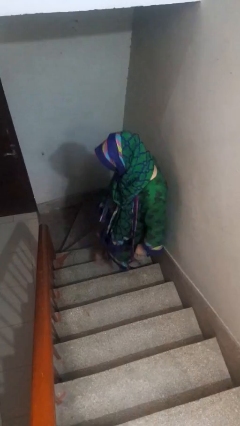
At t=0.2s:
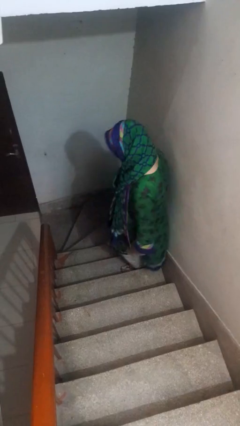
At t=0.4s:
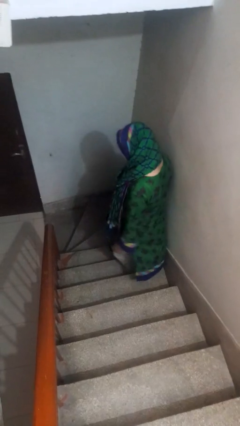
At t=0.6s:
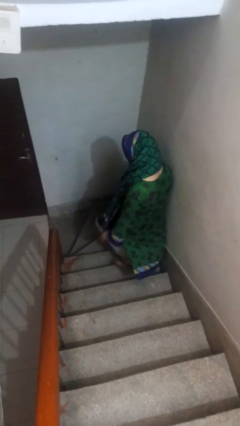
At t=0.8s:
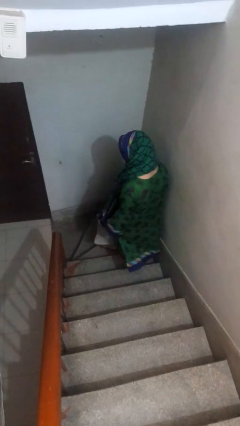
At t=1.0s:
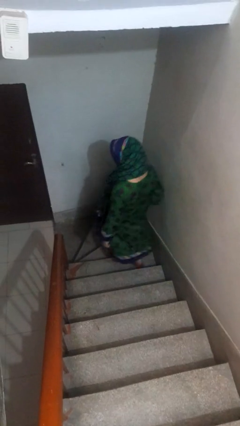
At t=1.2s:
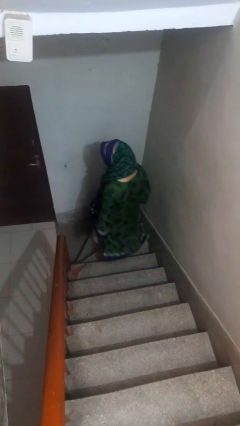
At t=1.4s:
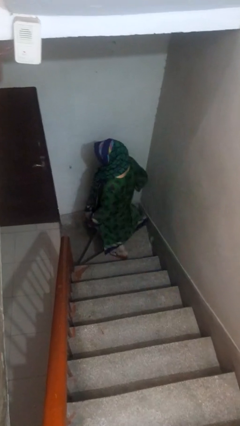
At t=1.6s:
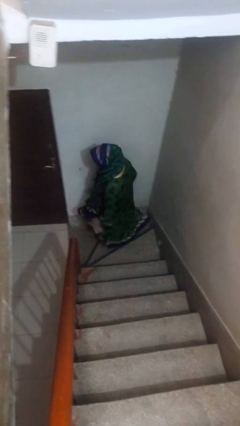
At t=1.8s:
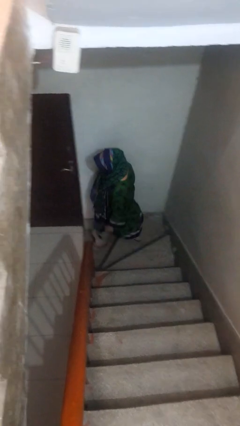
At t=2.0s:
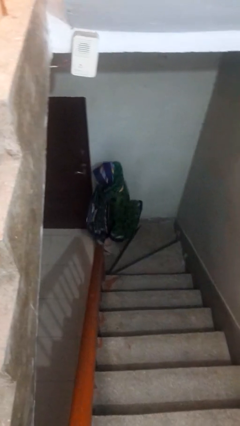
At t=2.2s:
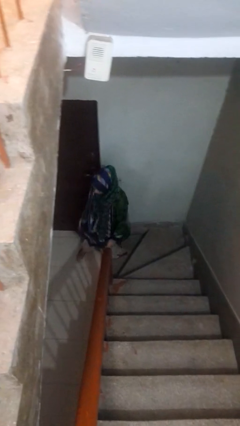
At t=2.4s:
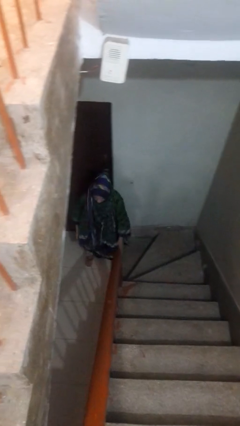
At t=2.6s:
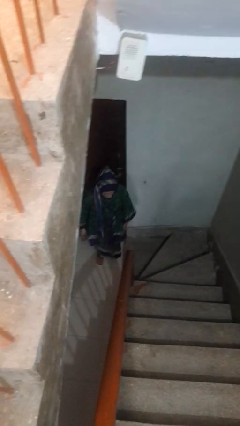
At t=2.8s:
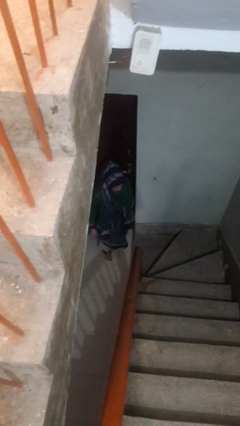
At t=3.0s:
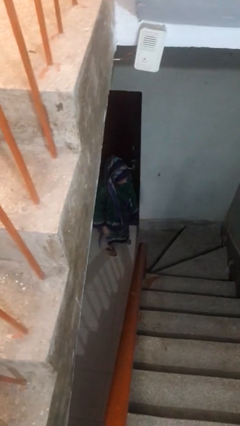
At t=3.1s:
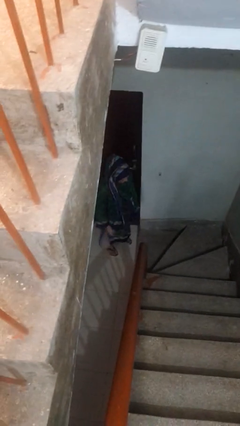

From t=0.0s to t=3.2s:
person climbs down stairs

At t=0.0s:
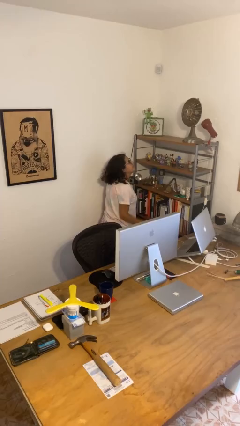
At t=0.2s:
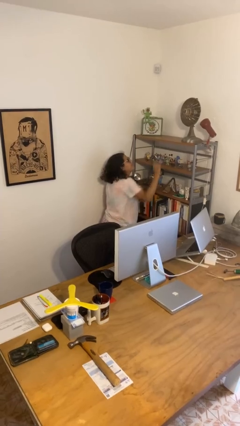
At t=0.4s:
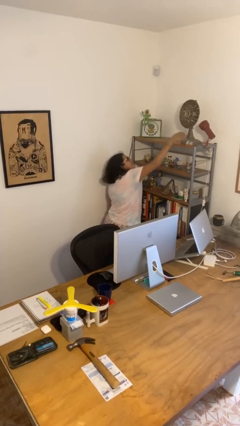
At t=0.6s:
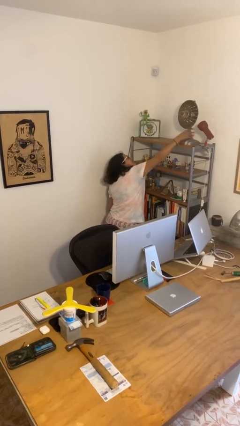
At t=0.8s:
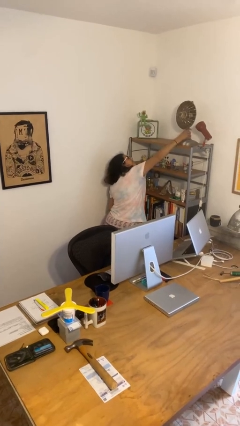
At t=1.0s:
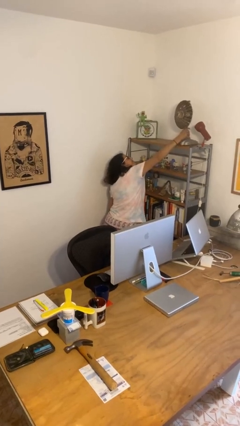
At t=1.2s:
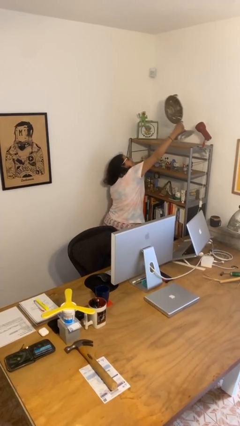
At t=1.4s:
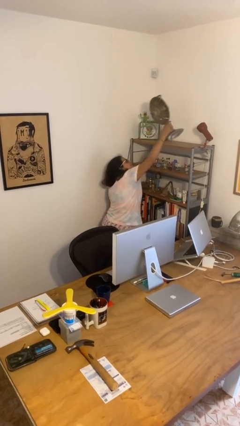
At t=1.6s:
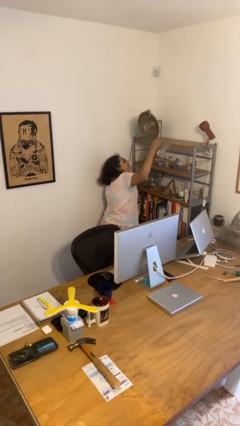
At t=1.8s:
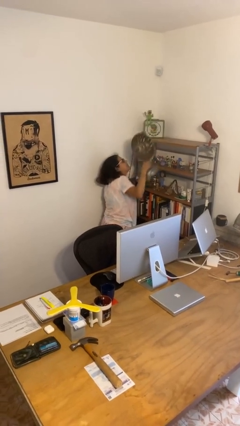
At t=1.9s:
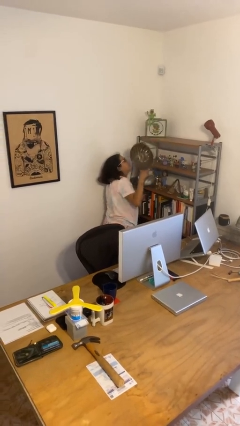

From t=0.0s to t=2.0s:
person picks up object from shelf

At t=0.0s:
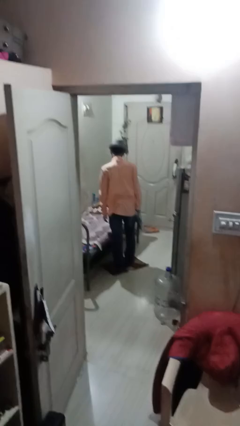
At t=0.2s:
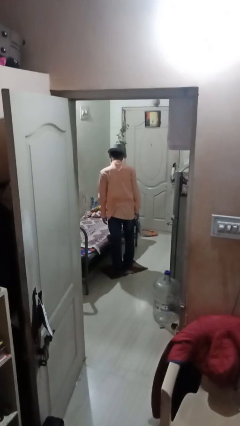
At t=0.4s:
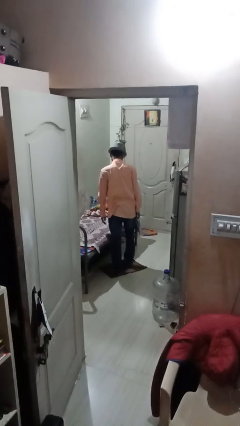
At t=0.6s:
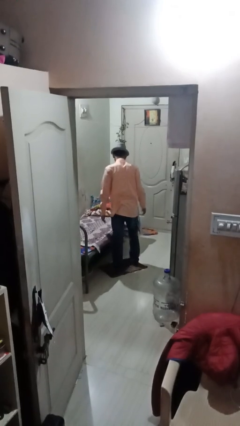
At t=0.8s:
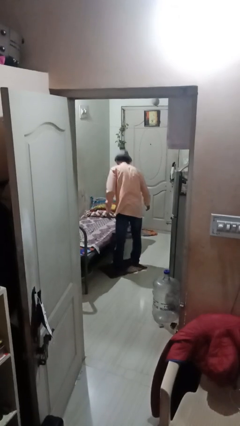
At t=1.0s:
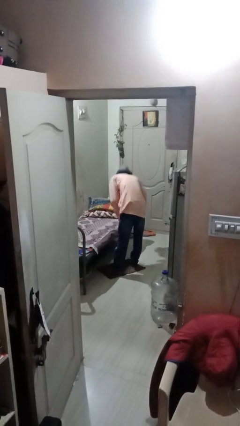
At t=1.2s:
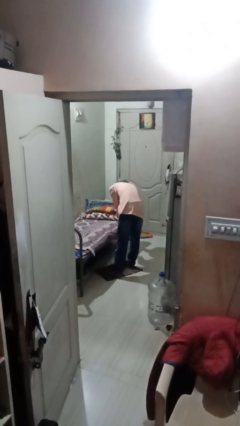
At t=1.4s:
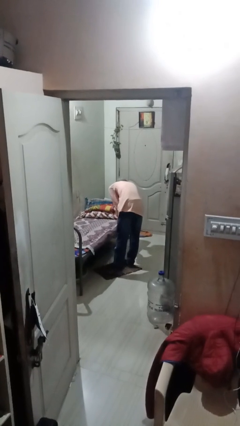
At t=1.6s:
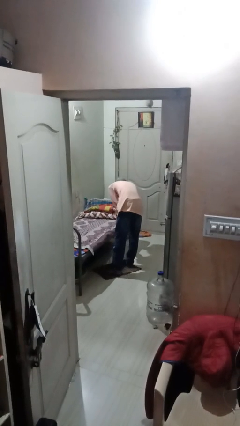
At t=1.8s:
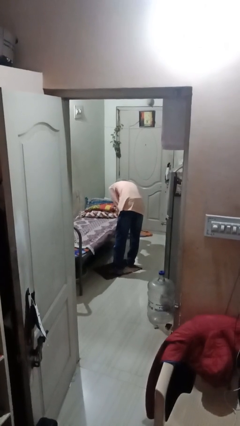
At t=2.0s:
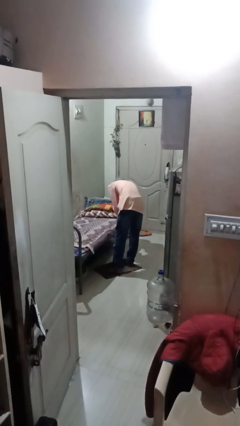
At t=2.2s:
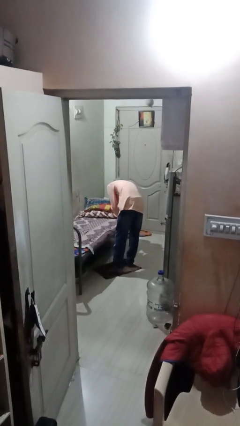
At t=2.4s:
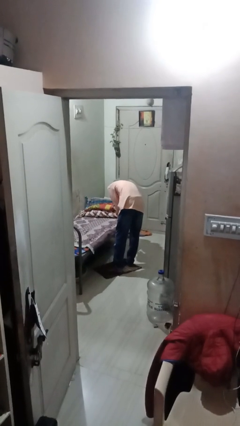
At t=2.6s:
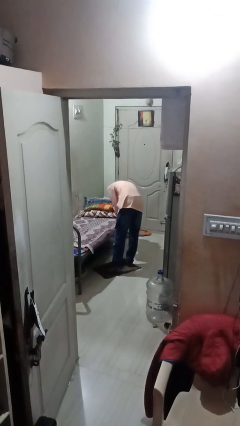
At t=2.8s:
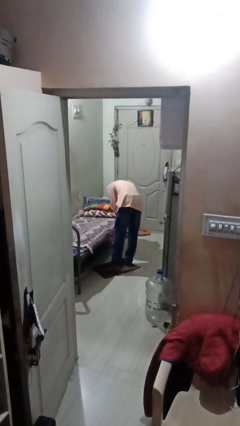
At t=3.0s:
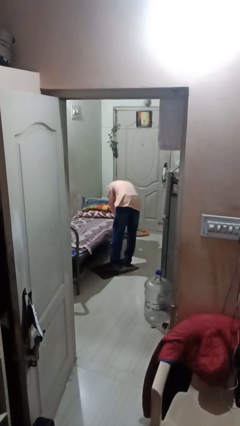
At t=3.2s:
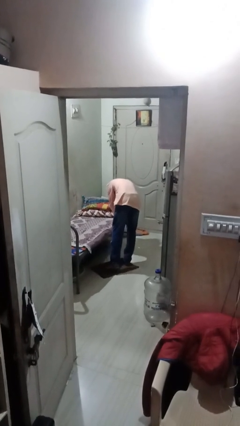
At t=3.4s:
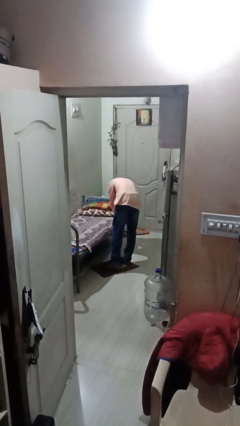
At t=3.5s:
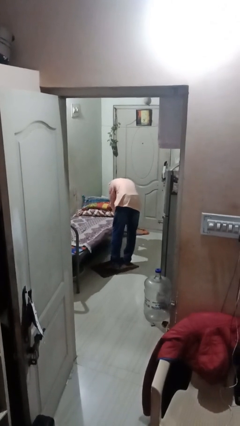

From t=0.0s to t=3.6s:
person makes bed

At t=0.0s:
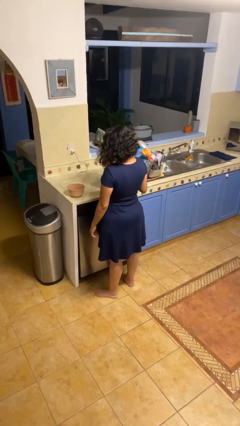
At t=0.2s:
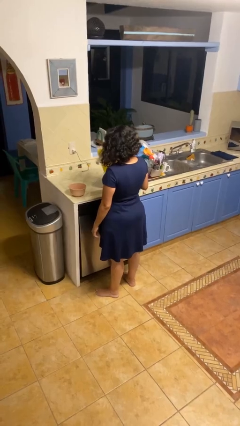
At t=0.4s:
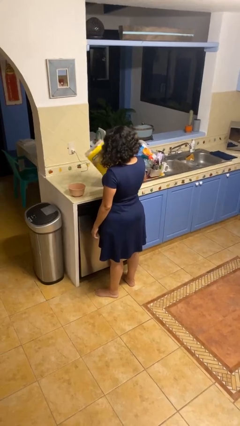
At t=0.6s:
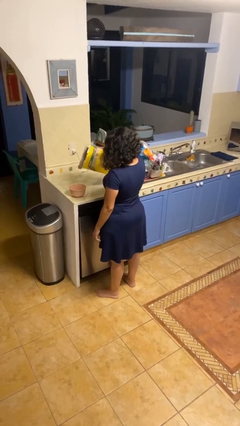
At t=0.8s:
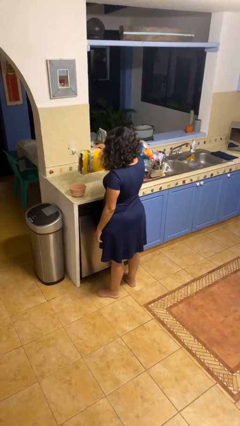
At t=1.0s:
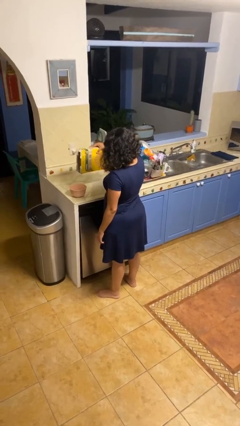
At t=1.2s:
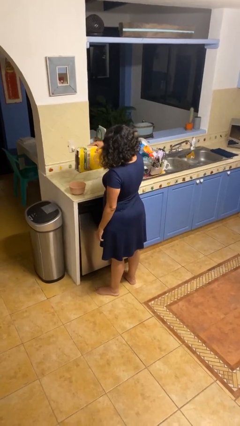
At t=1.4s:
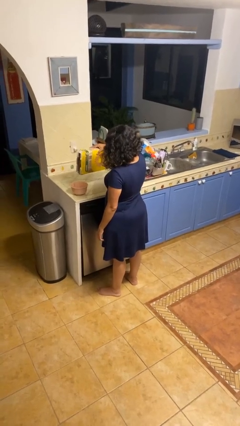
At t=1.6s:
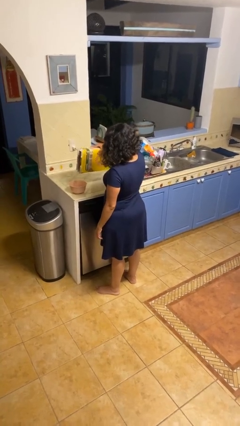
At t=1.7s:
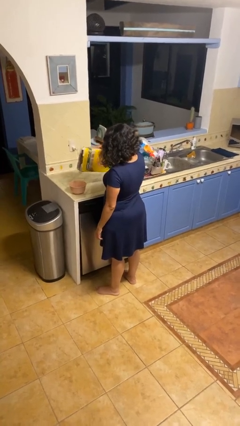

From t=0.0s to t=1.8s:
person pours into bowl

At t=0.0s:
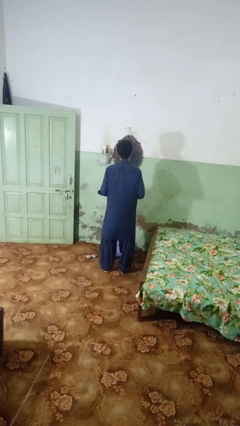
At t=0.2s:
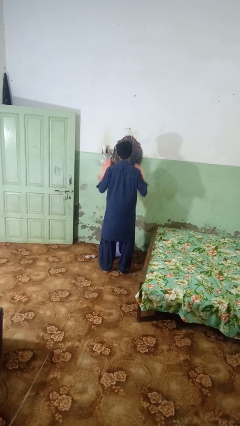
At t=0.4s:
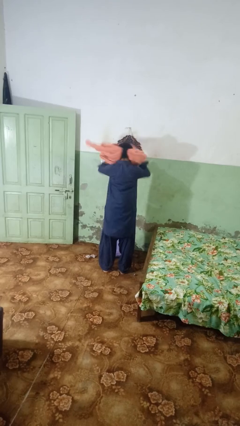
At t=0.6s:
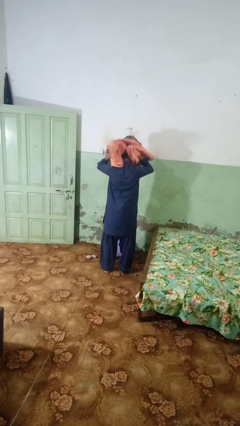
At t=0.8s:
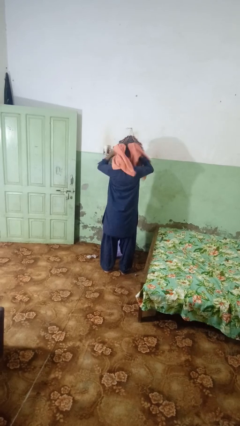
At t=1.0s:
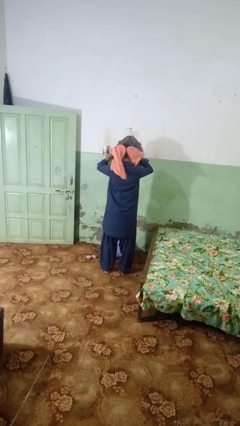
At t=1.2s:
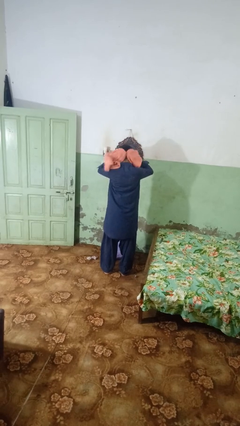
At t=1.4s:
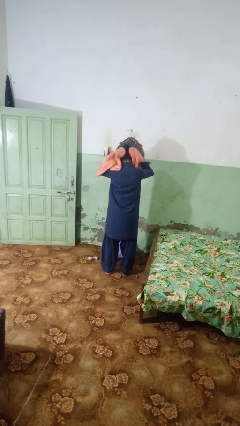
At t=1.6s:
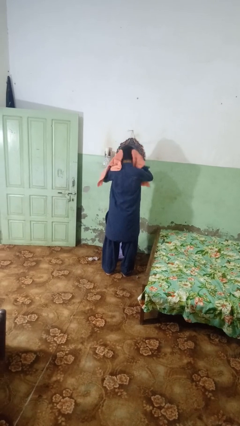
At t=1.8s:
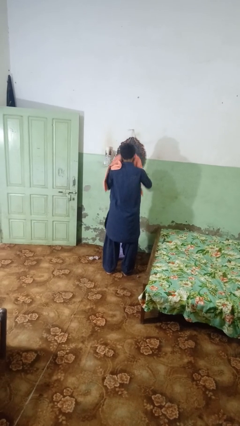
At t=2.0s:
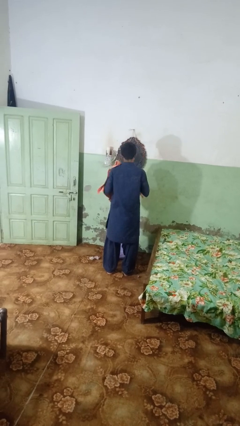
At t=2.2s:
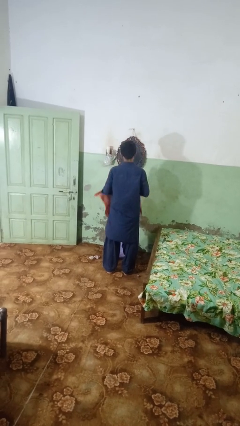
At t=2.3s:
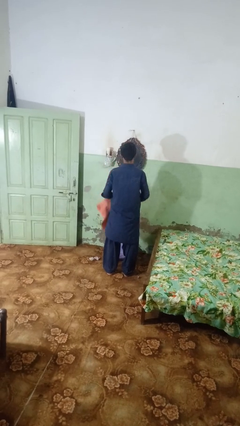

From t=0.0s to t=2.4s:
person dries hair with towel

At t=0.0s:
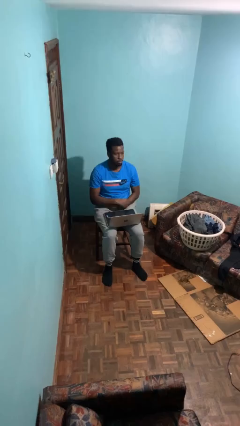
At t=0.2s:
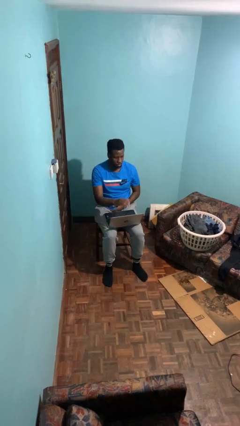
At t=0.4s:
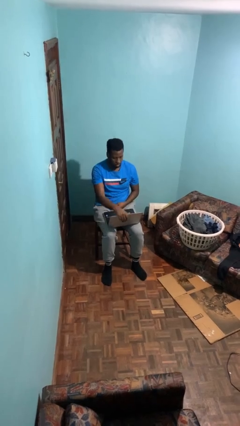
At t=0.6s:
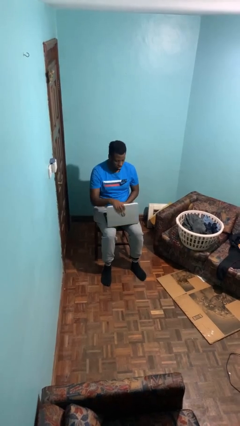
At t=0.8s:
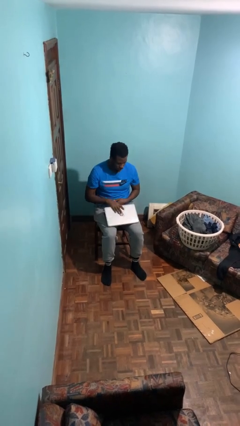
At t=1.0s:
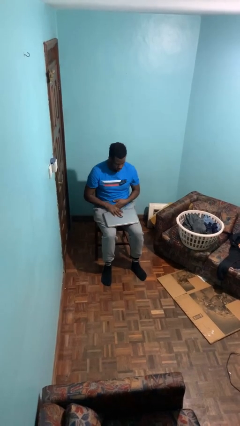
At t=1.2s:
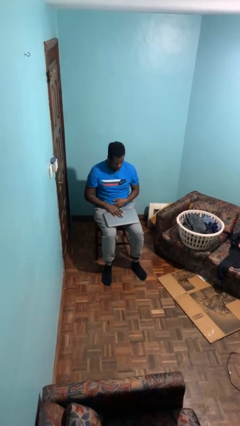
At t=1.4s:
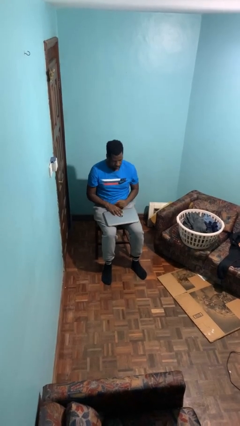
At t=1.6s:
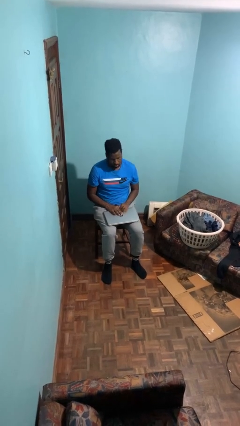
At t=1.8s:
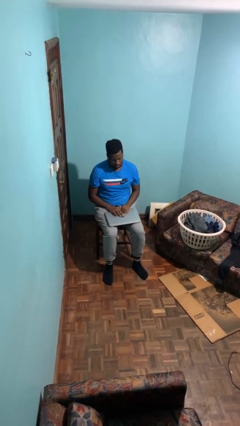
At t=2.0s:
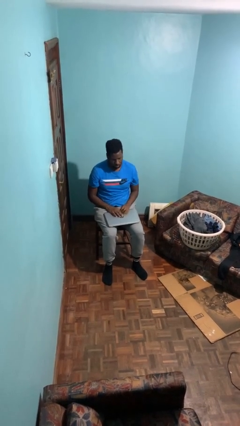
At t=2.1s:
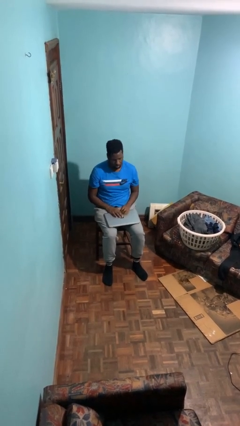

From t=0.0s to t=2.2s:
person closes laptop

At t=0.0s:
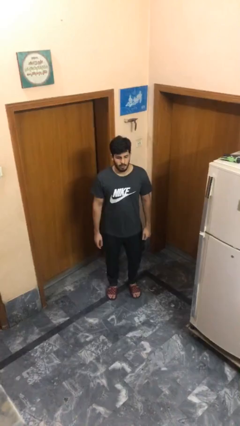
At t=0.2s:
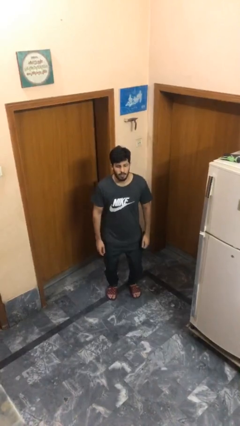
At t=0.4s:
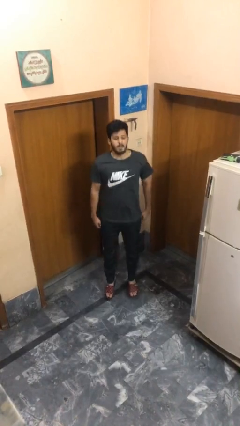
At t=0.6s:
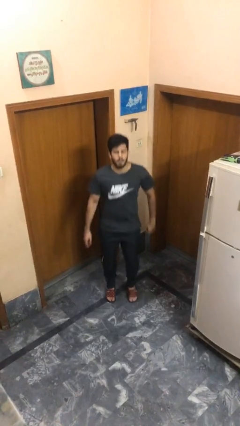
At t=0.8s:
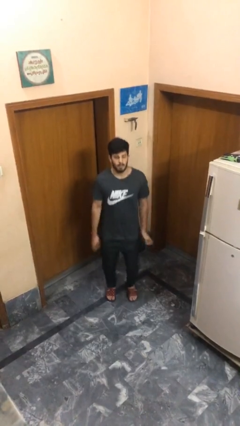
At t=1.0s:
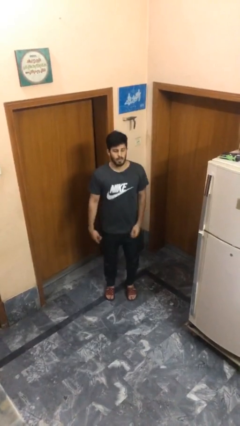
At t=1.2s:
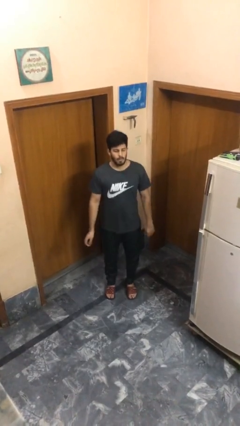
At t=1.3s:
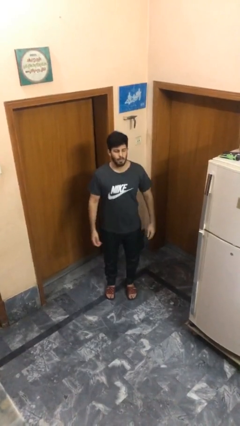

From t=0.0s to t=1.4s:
person jumps

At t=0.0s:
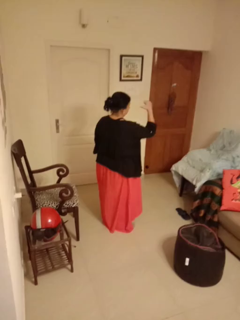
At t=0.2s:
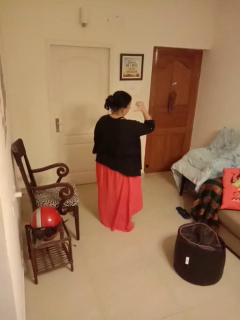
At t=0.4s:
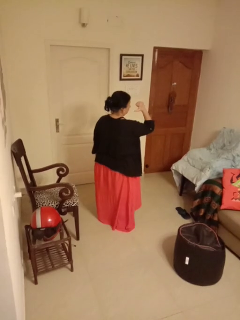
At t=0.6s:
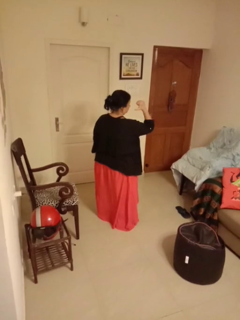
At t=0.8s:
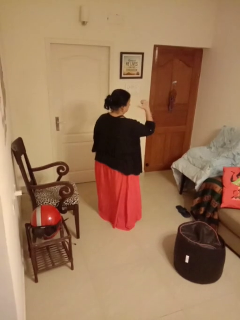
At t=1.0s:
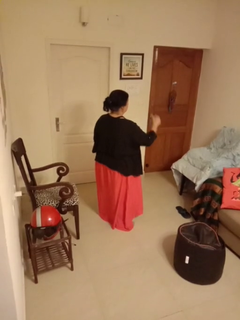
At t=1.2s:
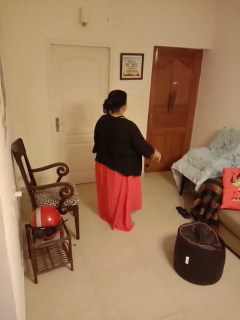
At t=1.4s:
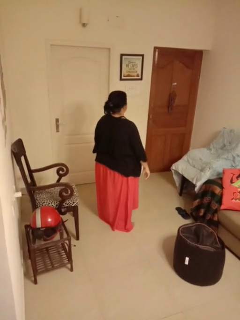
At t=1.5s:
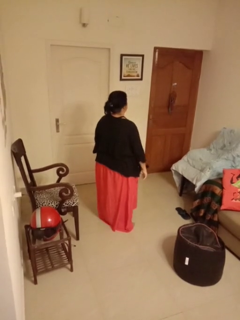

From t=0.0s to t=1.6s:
person gestures behind me
